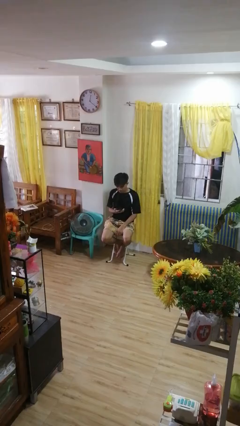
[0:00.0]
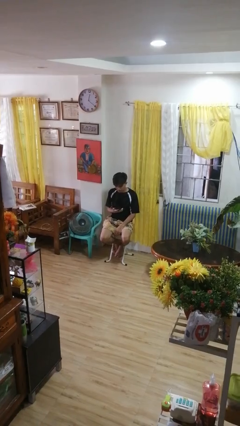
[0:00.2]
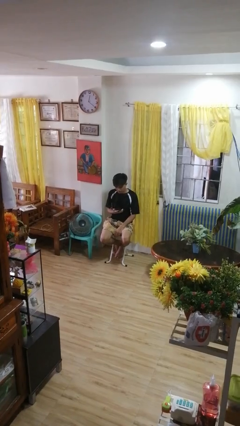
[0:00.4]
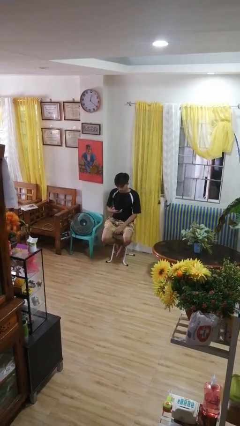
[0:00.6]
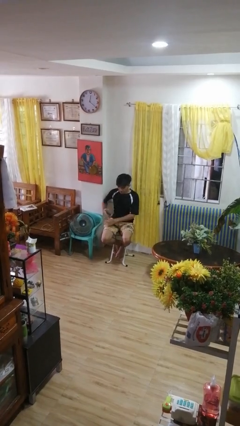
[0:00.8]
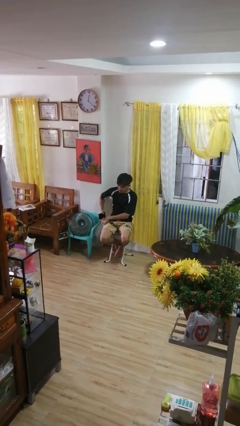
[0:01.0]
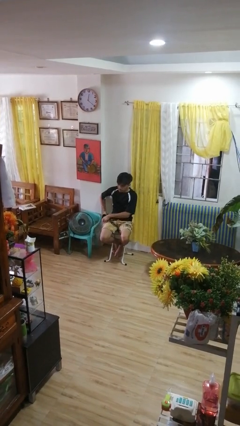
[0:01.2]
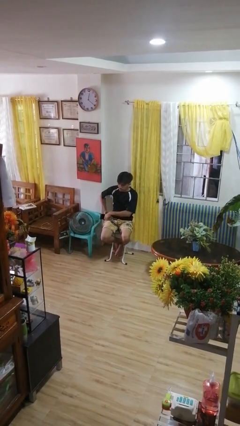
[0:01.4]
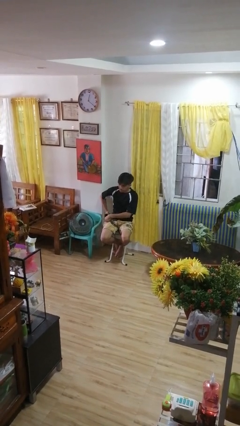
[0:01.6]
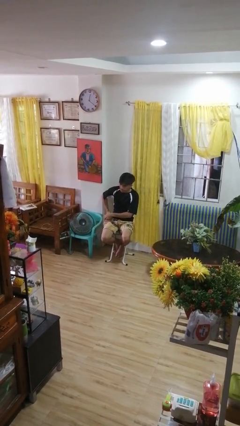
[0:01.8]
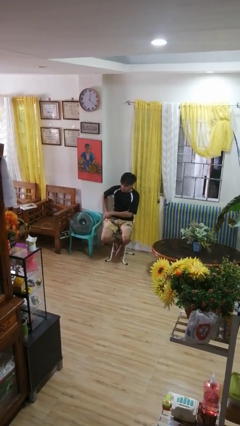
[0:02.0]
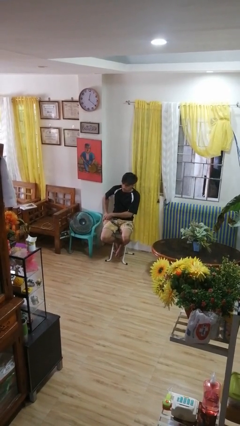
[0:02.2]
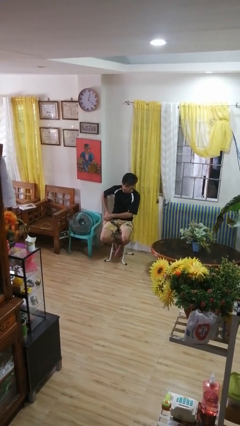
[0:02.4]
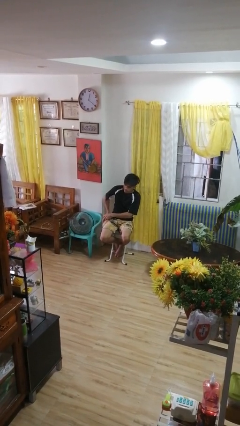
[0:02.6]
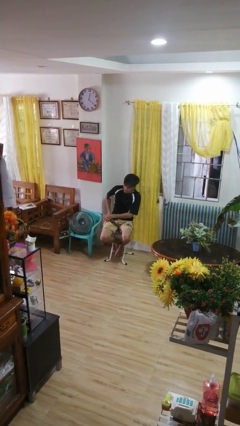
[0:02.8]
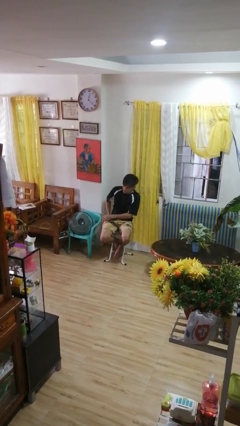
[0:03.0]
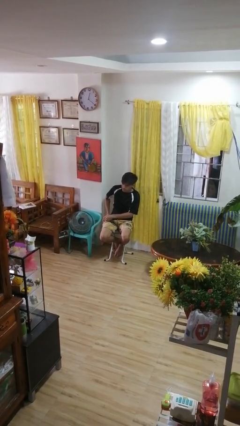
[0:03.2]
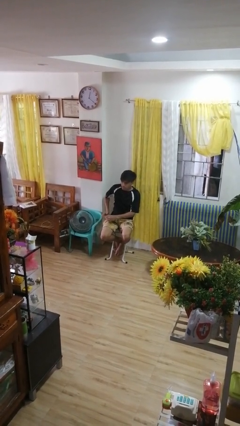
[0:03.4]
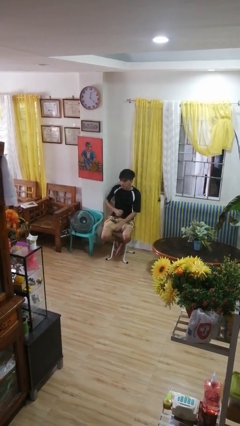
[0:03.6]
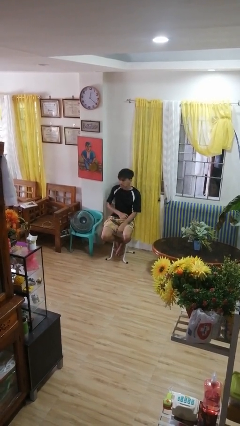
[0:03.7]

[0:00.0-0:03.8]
person puts phone into pocket

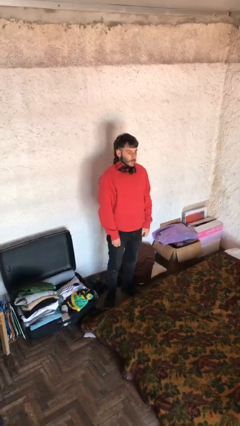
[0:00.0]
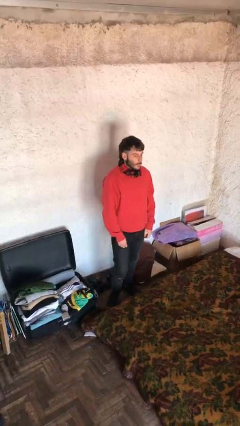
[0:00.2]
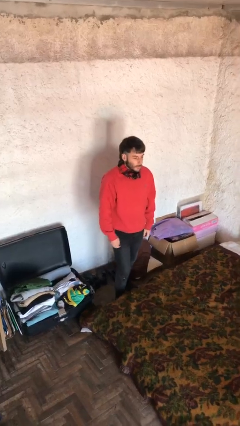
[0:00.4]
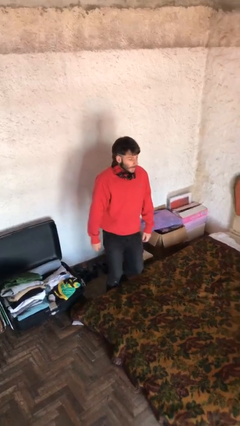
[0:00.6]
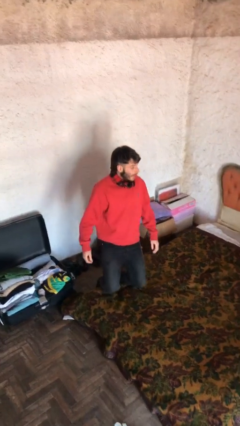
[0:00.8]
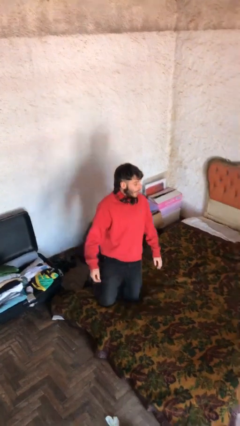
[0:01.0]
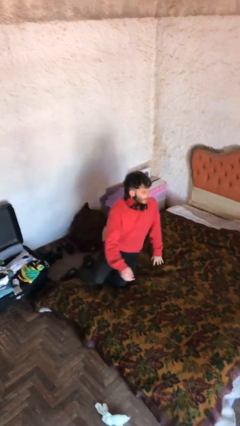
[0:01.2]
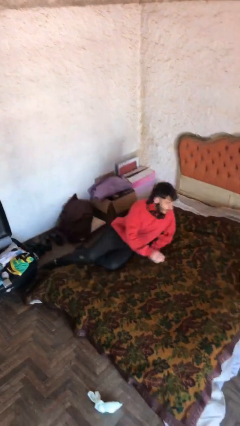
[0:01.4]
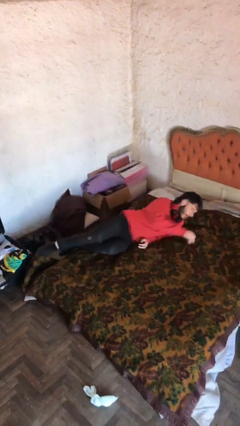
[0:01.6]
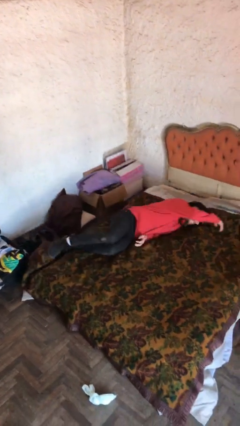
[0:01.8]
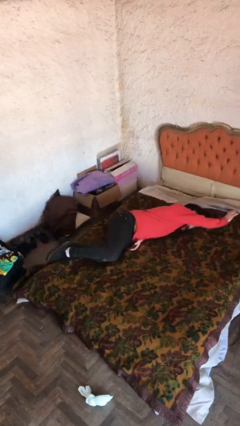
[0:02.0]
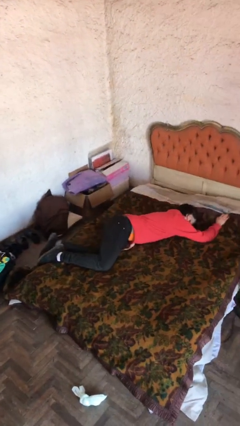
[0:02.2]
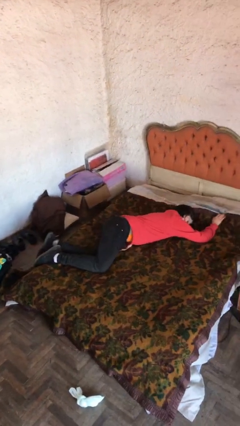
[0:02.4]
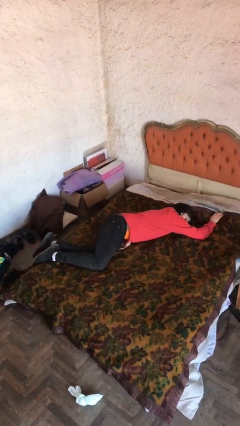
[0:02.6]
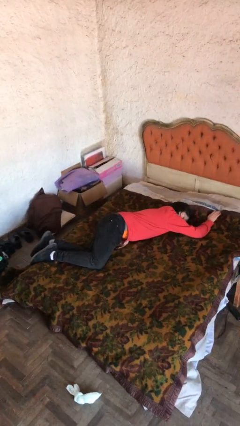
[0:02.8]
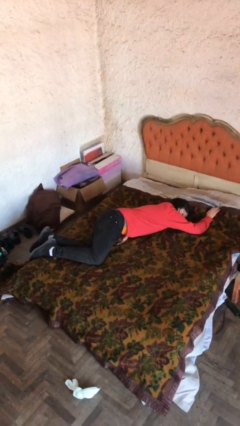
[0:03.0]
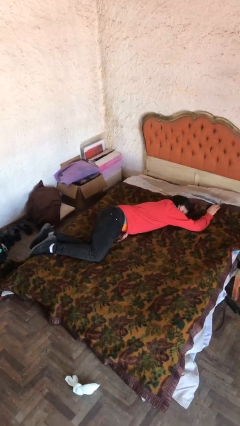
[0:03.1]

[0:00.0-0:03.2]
person lies down on bed

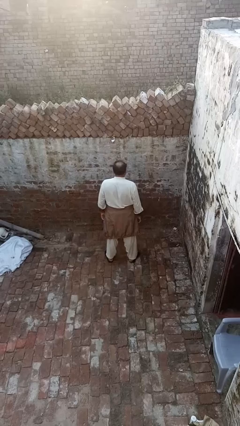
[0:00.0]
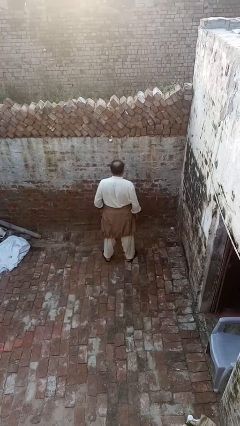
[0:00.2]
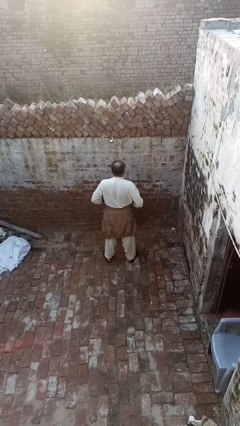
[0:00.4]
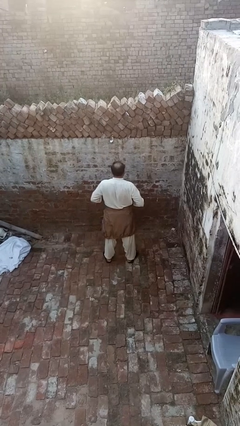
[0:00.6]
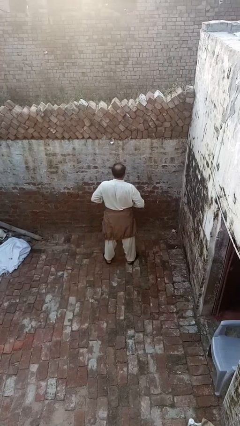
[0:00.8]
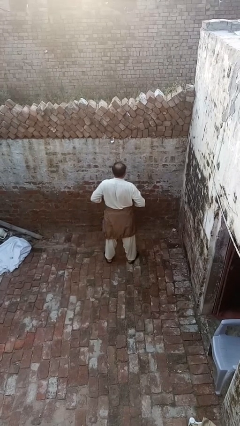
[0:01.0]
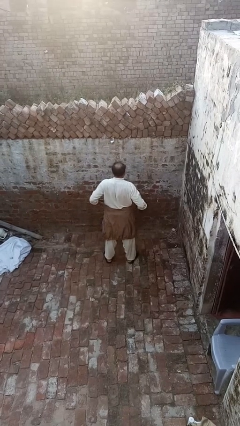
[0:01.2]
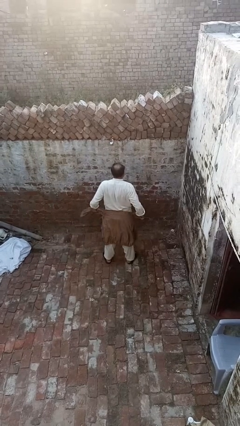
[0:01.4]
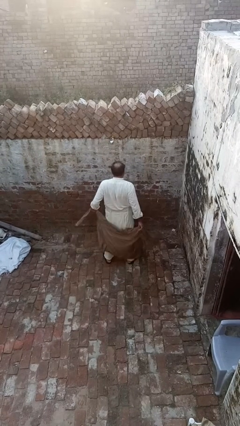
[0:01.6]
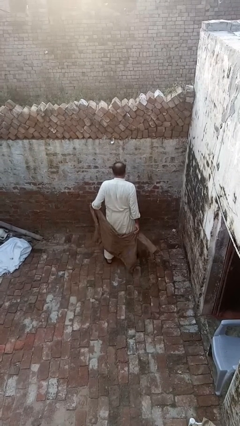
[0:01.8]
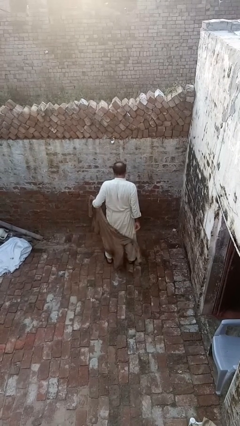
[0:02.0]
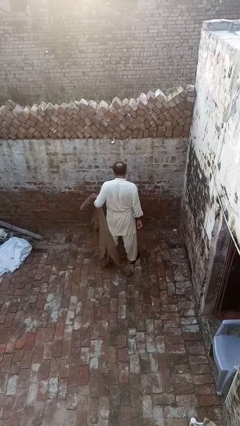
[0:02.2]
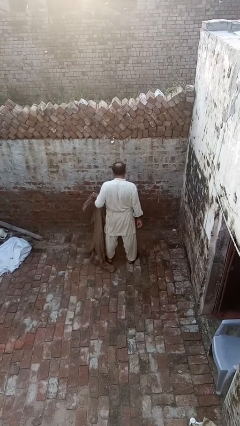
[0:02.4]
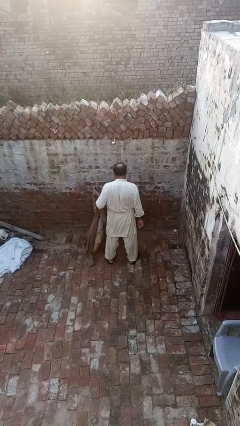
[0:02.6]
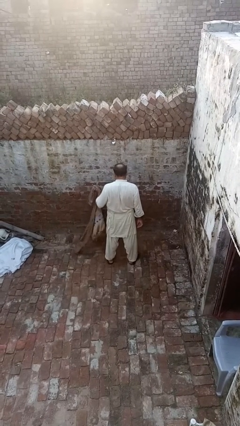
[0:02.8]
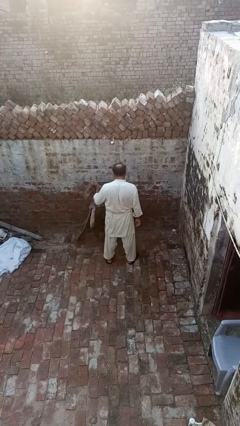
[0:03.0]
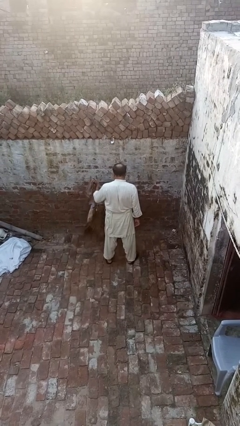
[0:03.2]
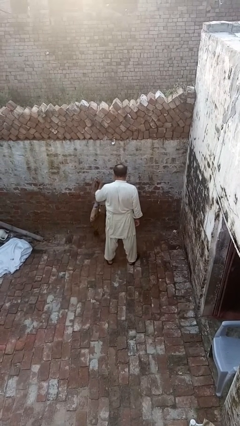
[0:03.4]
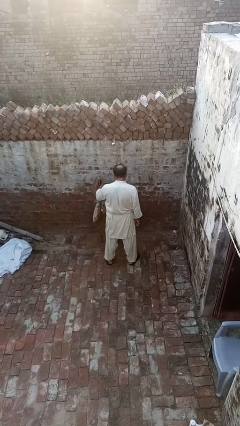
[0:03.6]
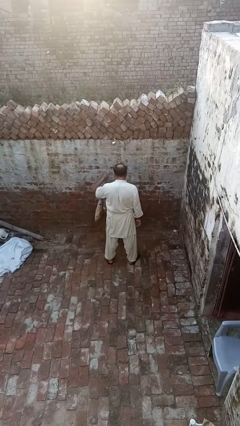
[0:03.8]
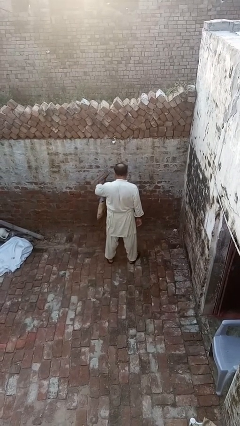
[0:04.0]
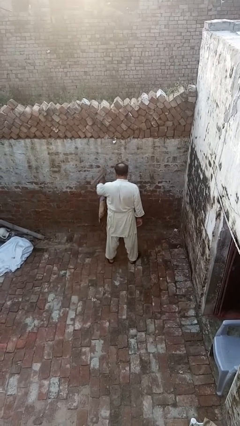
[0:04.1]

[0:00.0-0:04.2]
person unties jacket around waist

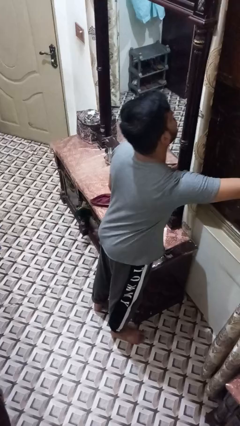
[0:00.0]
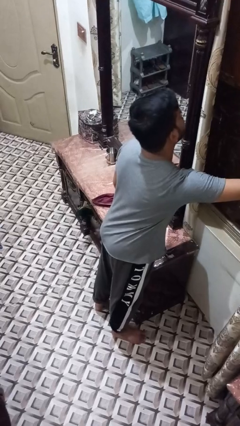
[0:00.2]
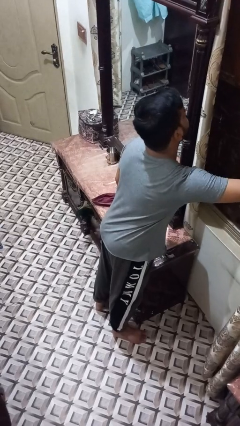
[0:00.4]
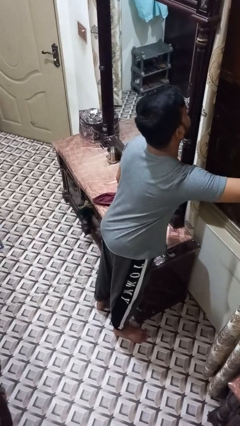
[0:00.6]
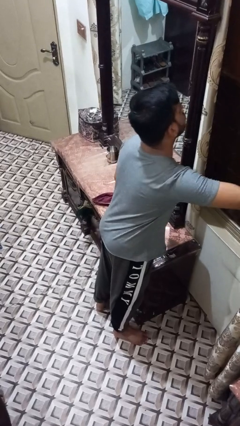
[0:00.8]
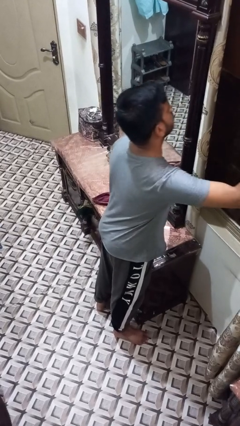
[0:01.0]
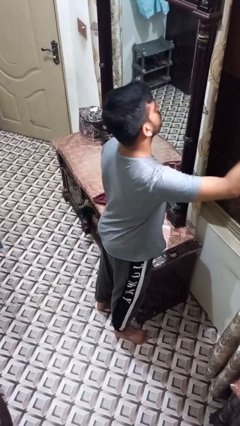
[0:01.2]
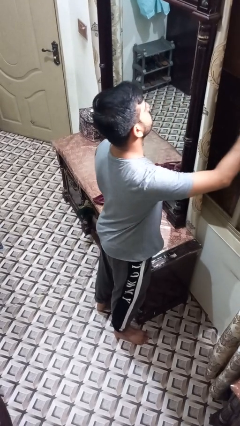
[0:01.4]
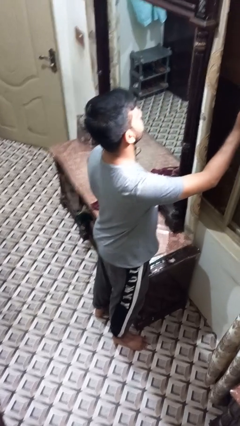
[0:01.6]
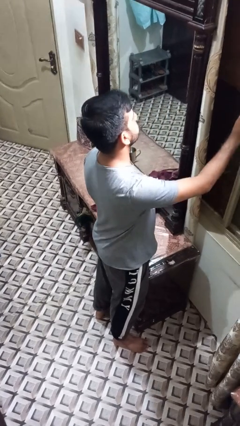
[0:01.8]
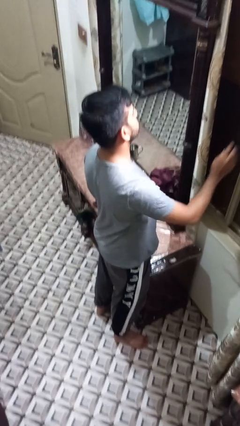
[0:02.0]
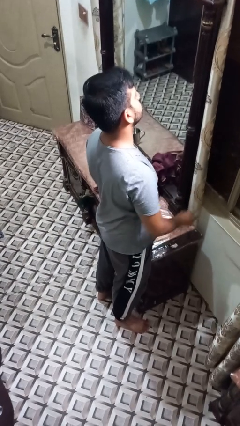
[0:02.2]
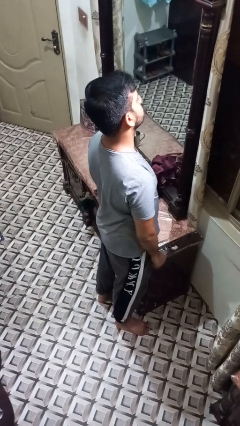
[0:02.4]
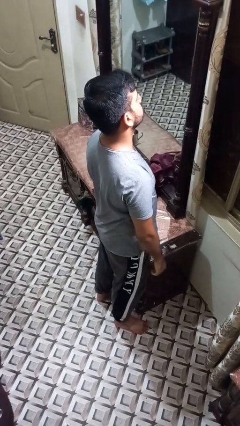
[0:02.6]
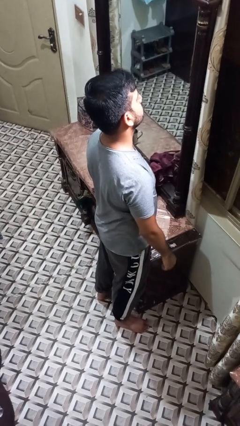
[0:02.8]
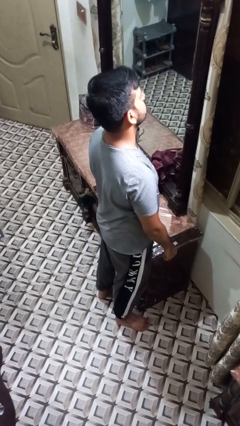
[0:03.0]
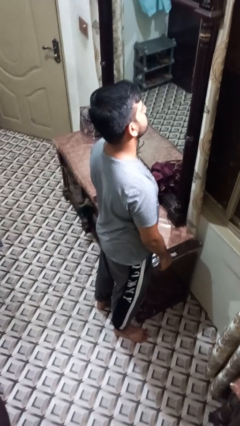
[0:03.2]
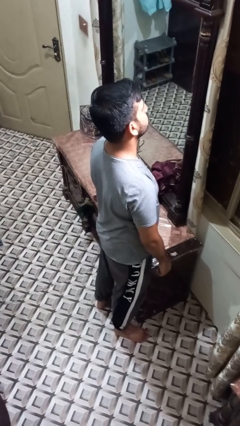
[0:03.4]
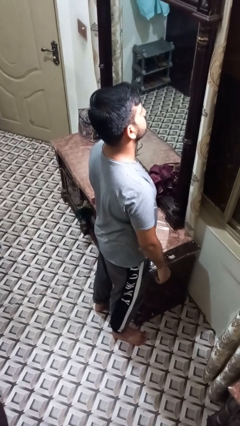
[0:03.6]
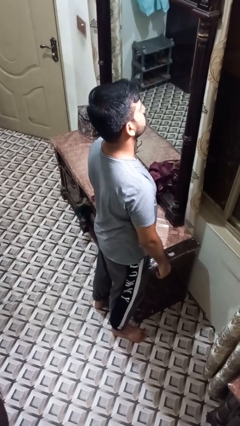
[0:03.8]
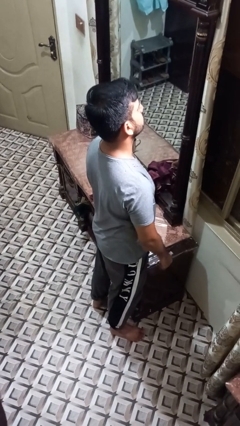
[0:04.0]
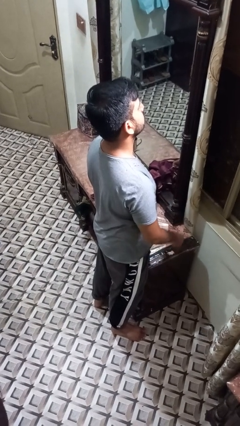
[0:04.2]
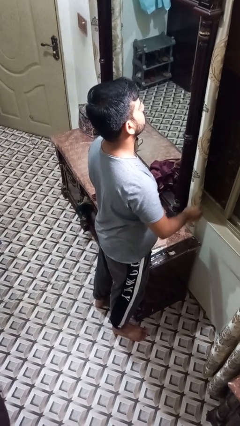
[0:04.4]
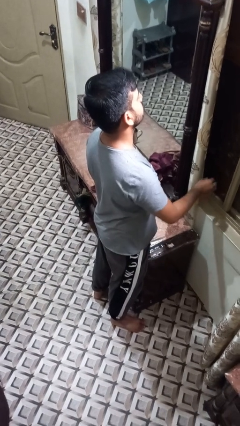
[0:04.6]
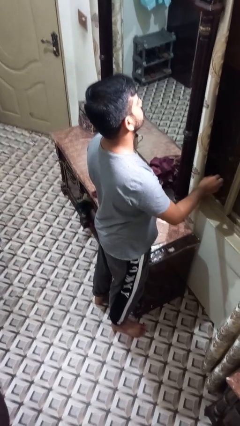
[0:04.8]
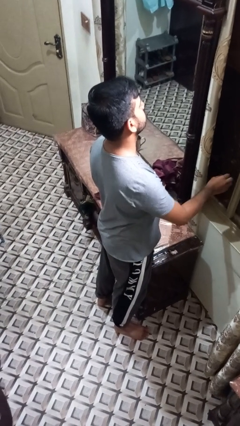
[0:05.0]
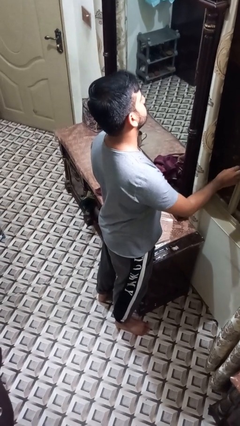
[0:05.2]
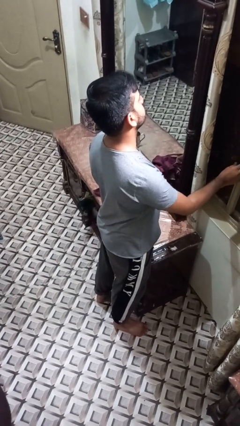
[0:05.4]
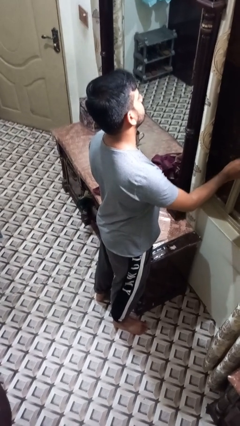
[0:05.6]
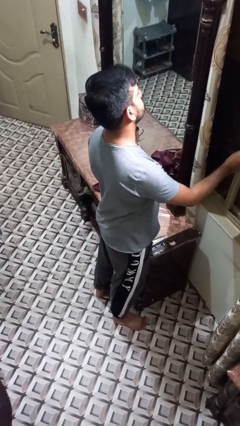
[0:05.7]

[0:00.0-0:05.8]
person opens sliding door

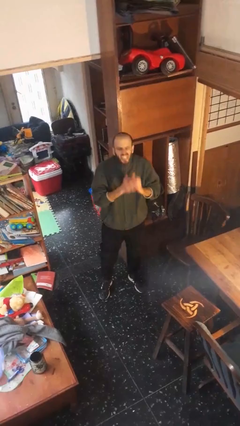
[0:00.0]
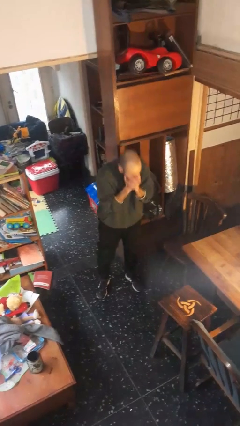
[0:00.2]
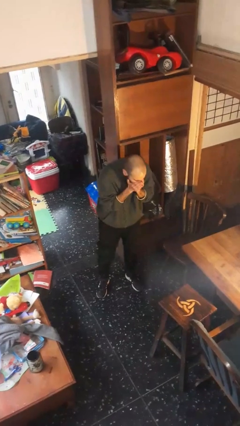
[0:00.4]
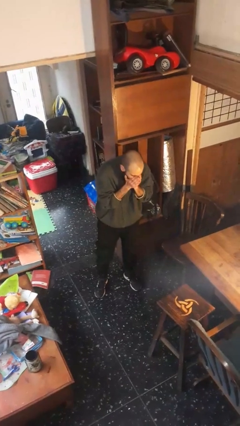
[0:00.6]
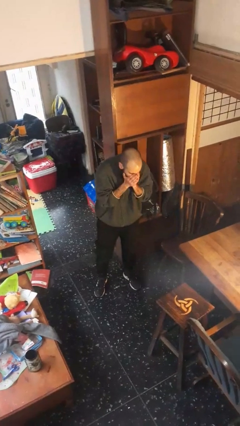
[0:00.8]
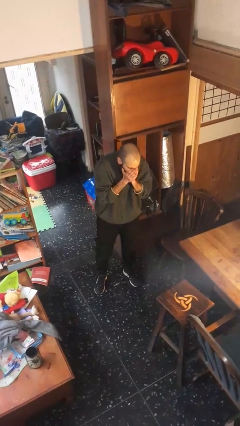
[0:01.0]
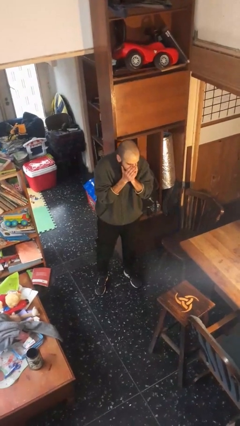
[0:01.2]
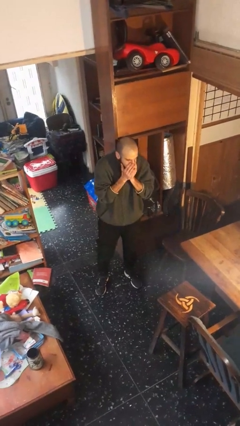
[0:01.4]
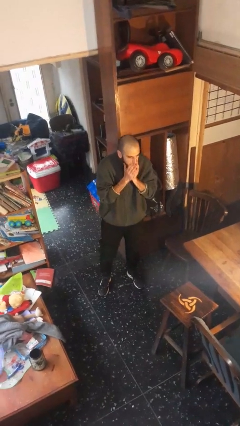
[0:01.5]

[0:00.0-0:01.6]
person sneezes into hand
